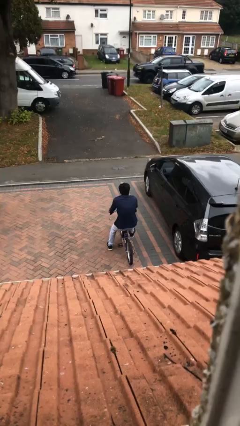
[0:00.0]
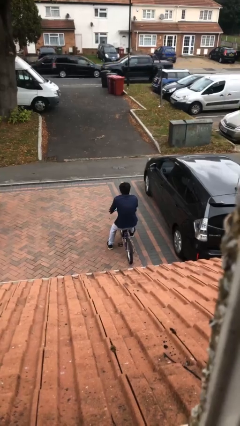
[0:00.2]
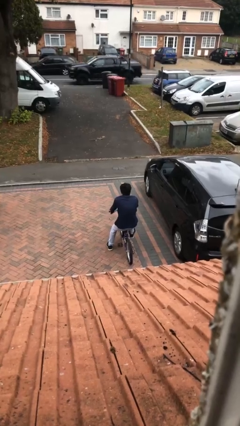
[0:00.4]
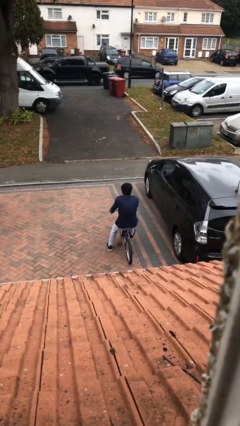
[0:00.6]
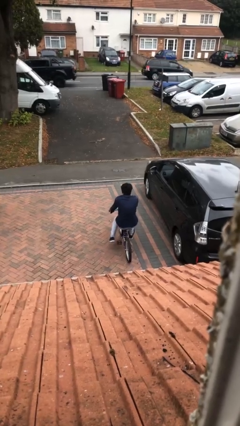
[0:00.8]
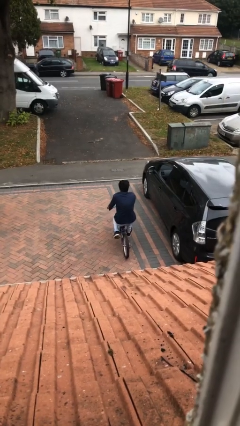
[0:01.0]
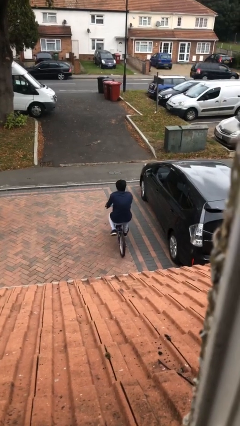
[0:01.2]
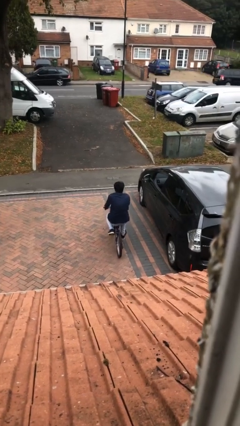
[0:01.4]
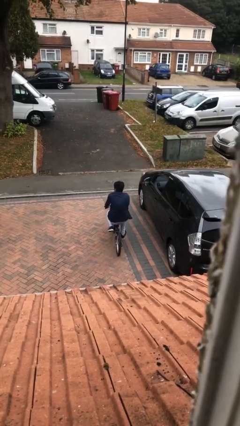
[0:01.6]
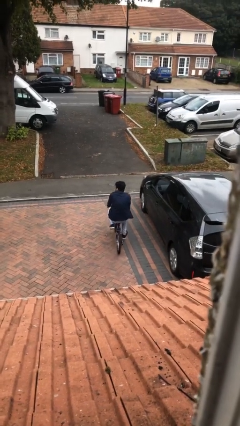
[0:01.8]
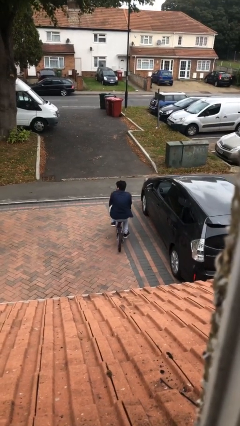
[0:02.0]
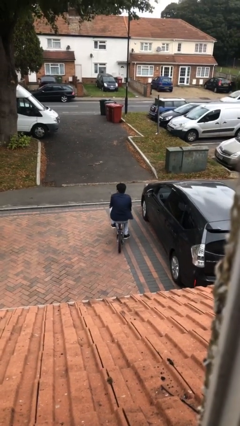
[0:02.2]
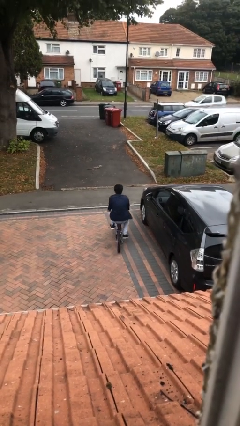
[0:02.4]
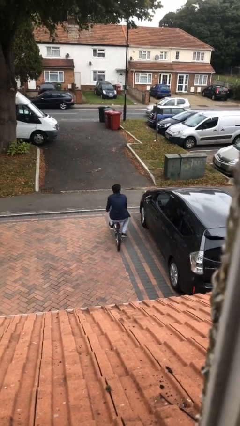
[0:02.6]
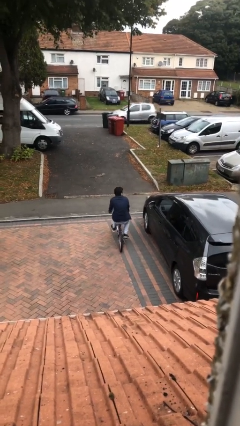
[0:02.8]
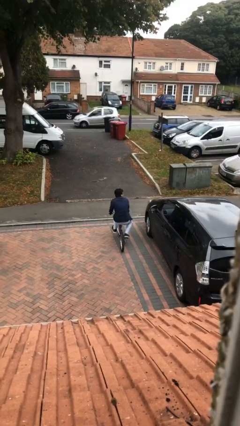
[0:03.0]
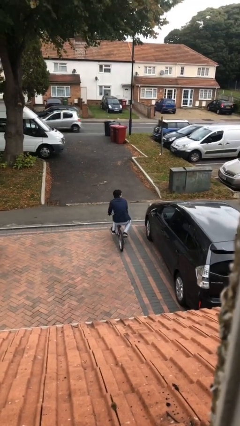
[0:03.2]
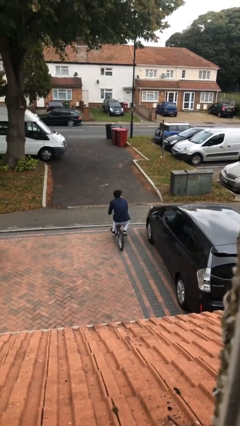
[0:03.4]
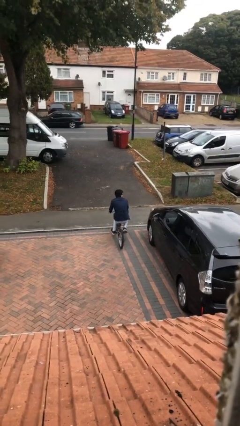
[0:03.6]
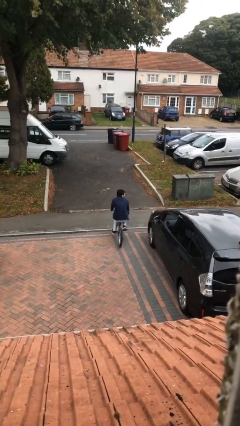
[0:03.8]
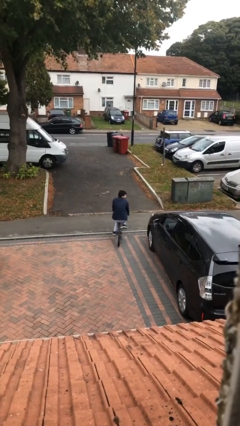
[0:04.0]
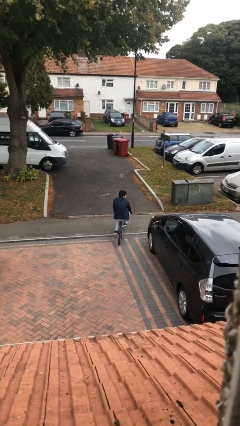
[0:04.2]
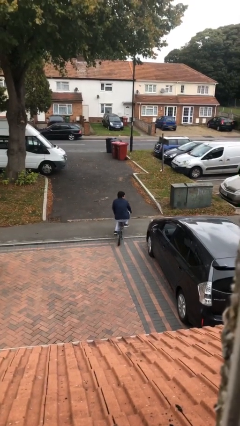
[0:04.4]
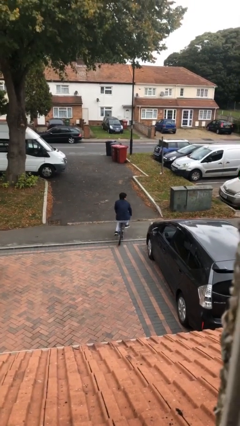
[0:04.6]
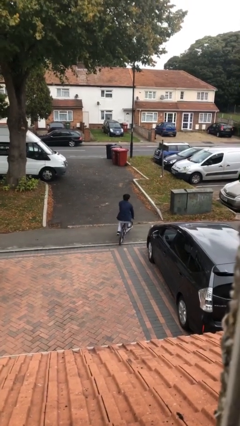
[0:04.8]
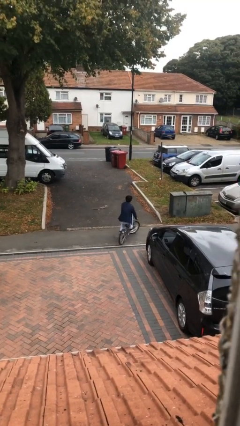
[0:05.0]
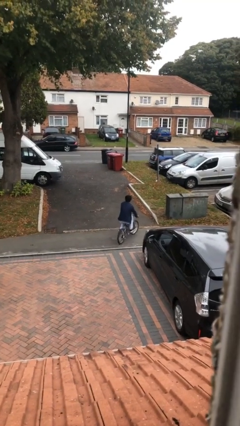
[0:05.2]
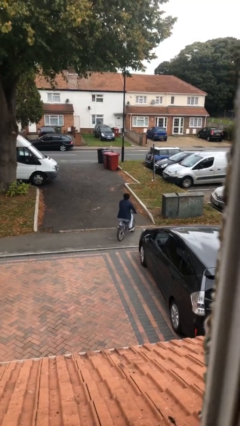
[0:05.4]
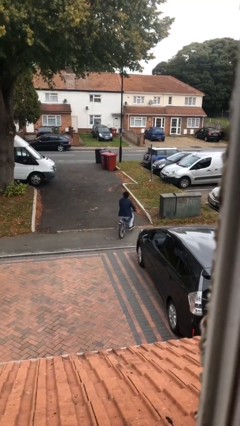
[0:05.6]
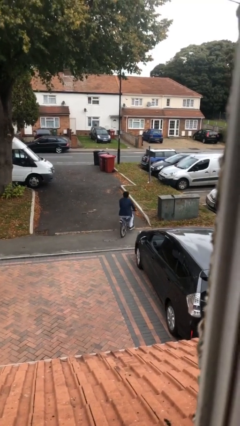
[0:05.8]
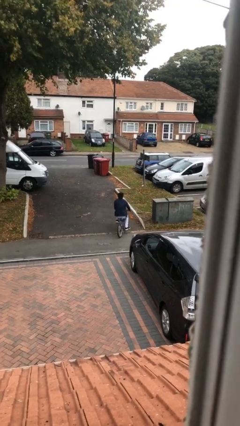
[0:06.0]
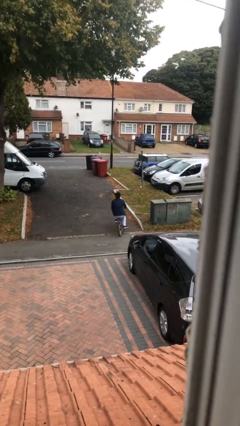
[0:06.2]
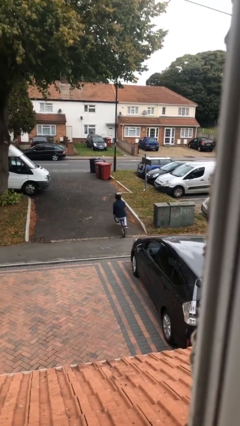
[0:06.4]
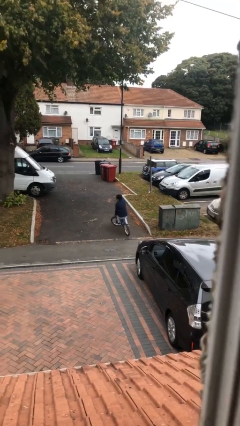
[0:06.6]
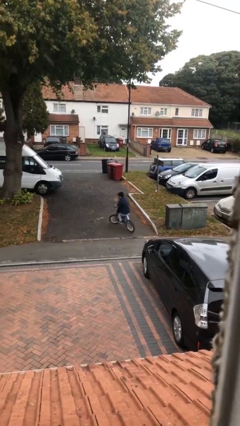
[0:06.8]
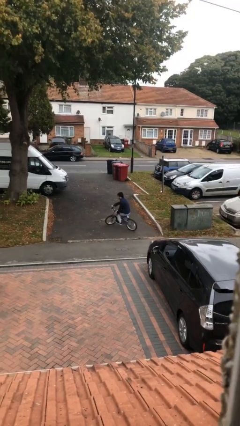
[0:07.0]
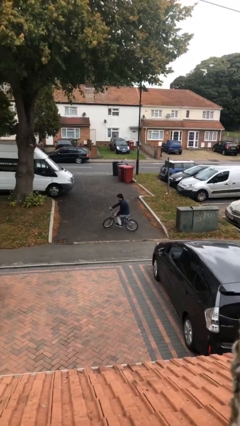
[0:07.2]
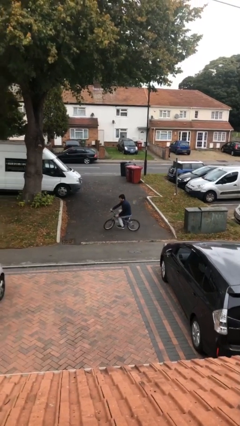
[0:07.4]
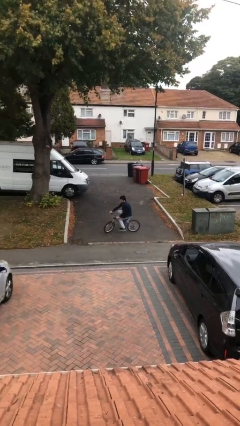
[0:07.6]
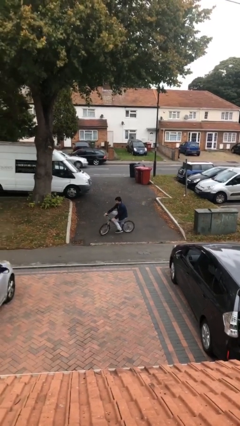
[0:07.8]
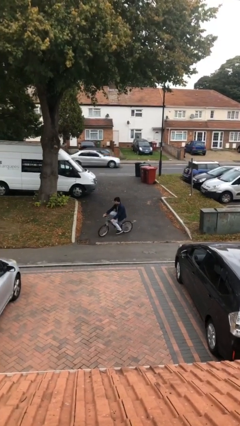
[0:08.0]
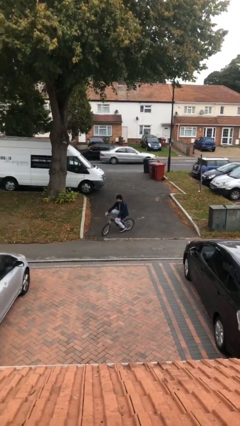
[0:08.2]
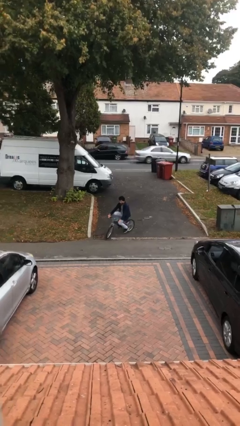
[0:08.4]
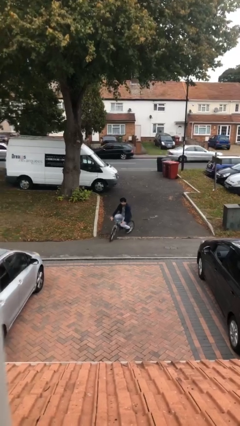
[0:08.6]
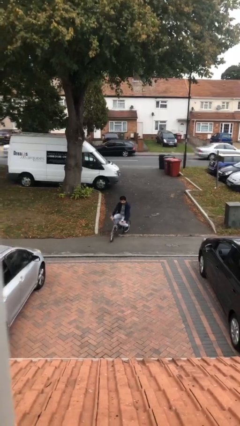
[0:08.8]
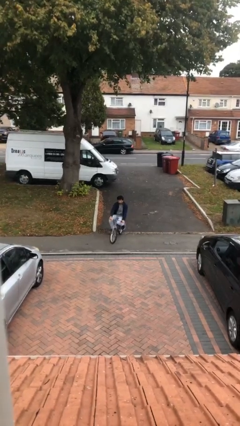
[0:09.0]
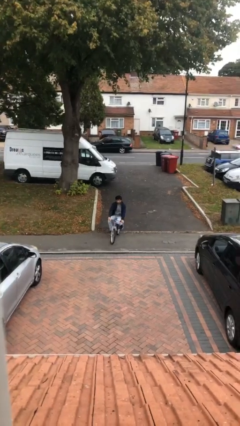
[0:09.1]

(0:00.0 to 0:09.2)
person rides bicycle

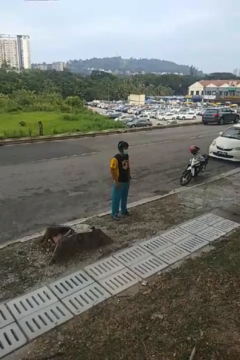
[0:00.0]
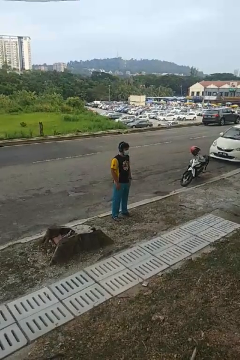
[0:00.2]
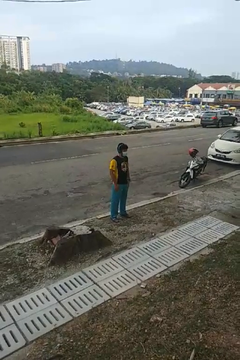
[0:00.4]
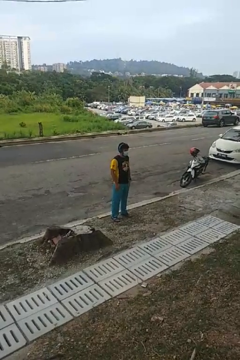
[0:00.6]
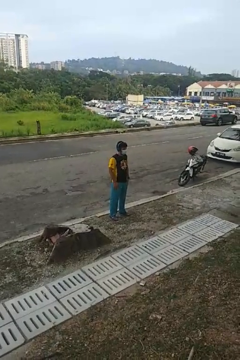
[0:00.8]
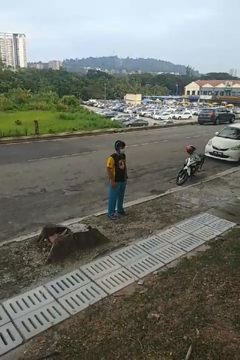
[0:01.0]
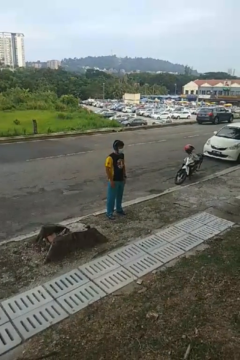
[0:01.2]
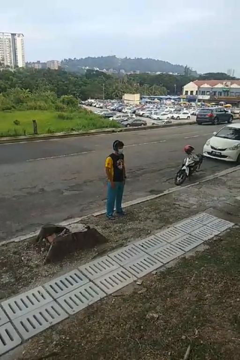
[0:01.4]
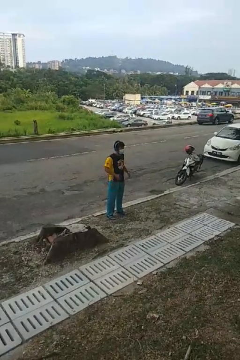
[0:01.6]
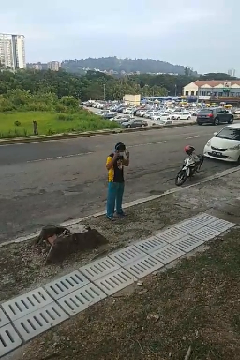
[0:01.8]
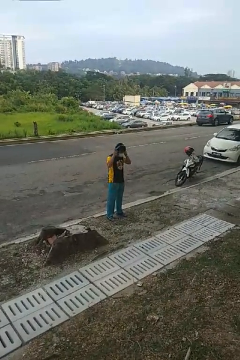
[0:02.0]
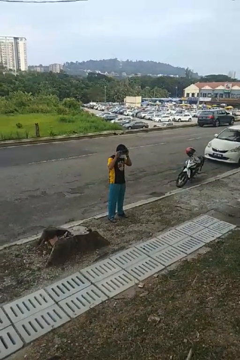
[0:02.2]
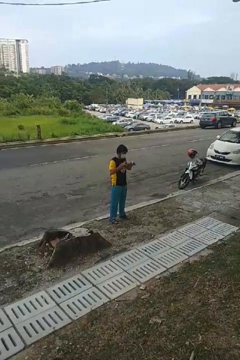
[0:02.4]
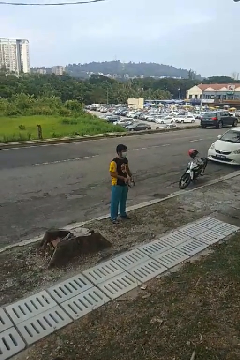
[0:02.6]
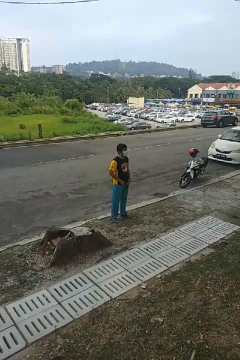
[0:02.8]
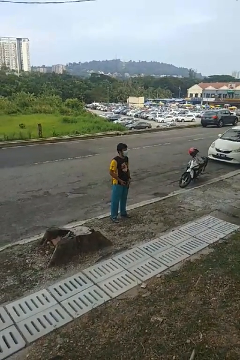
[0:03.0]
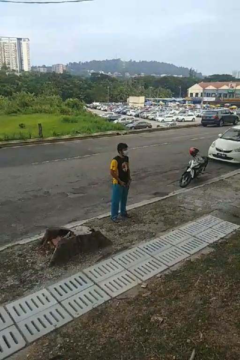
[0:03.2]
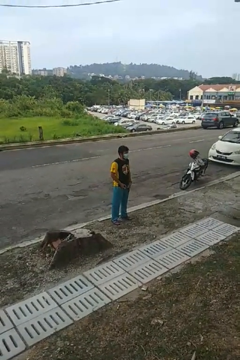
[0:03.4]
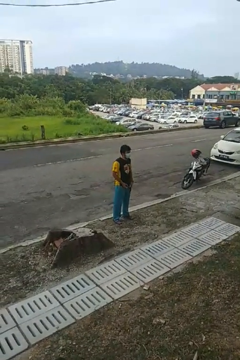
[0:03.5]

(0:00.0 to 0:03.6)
person takes off headphones

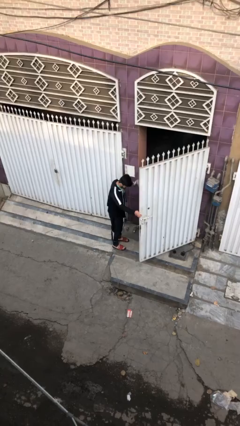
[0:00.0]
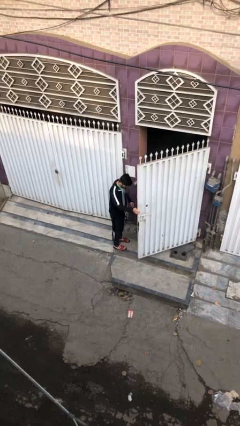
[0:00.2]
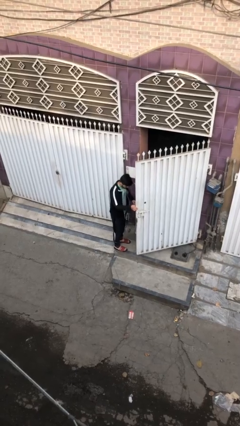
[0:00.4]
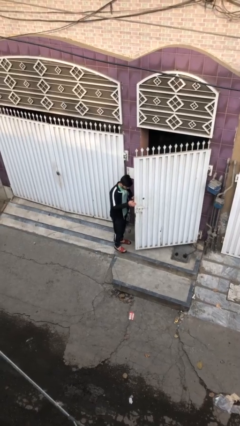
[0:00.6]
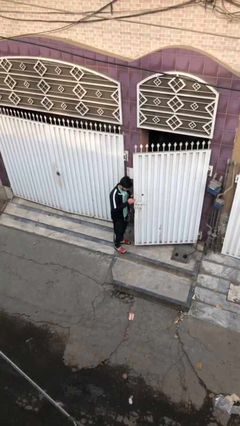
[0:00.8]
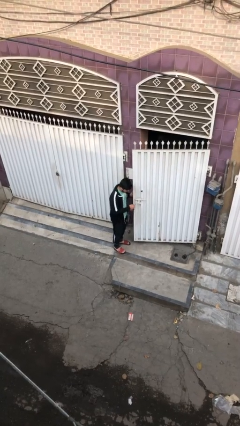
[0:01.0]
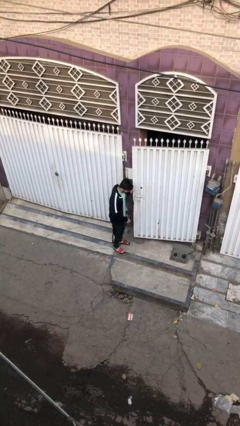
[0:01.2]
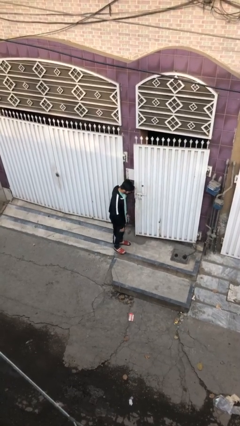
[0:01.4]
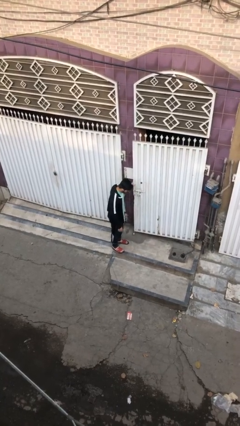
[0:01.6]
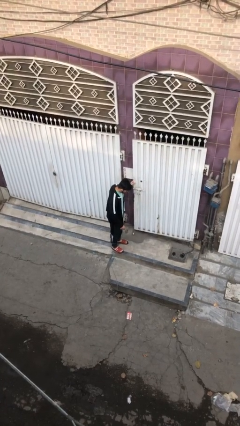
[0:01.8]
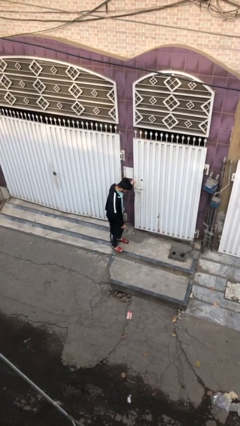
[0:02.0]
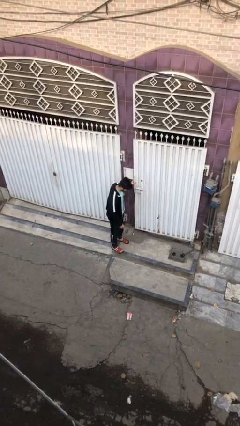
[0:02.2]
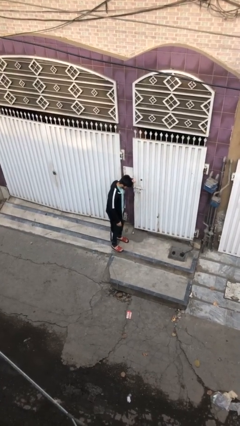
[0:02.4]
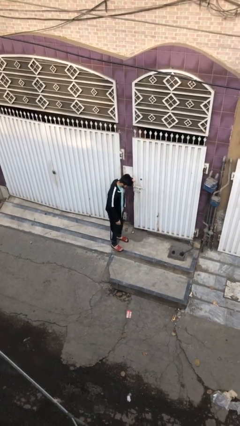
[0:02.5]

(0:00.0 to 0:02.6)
person closes facility door

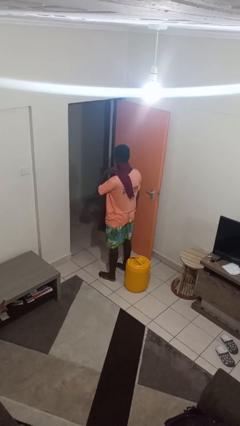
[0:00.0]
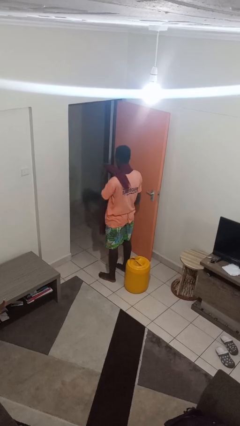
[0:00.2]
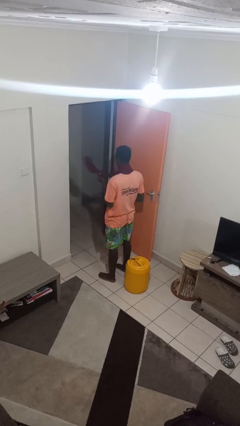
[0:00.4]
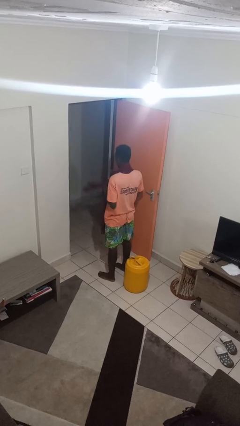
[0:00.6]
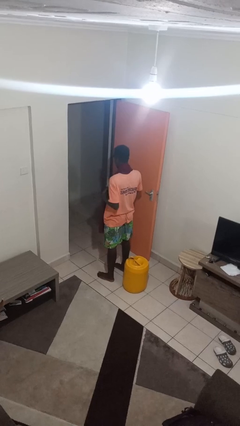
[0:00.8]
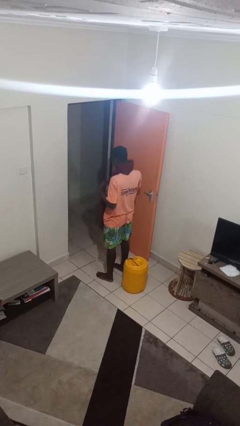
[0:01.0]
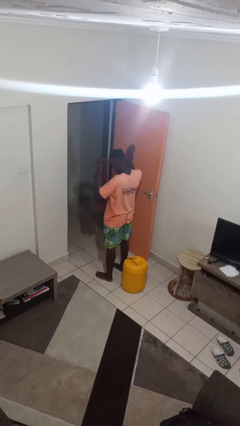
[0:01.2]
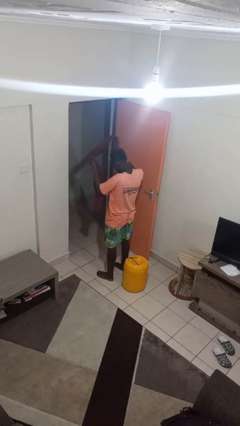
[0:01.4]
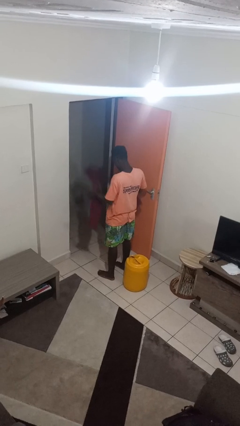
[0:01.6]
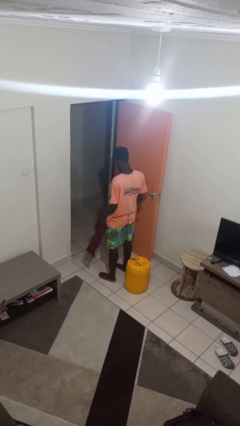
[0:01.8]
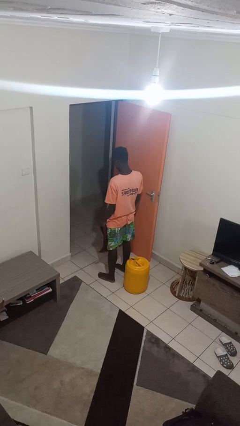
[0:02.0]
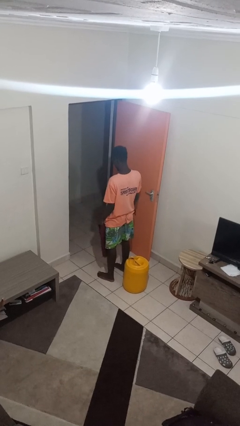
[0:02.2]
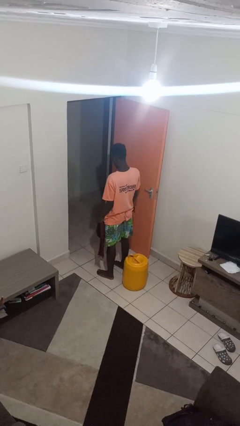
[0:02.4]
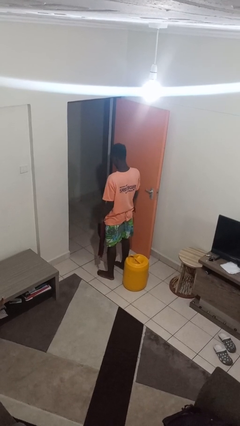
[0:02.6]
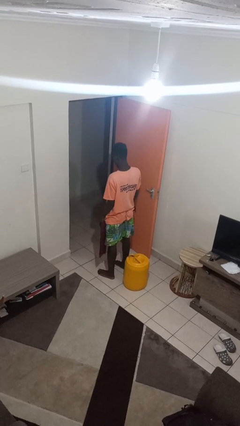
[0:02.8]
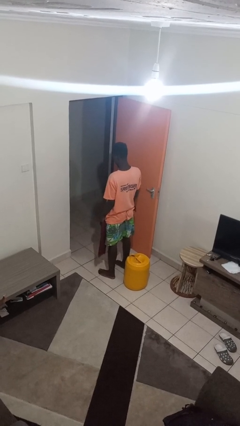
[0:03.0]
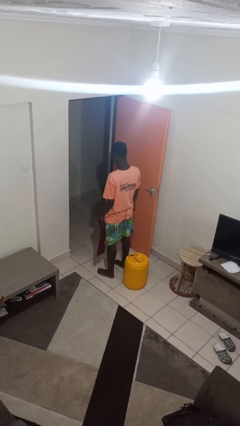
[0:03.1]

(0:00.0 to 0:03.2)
person takes off scarf

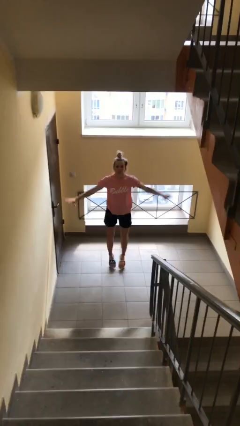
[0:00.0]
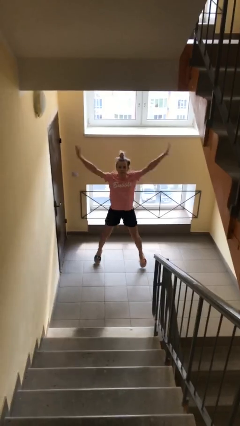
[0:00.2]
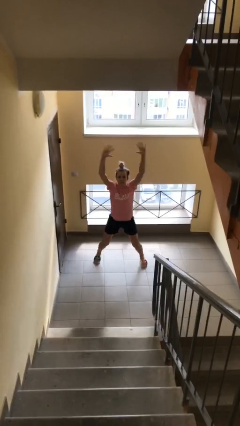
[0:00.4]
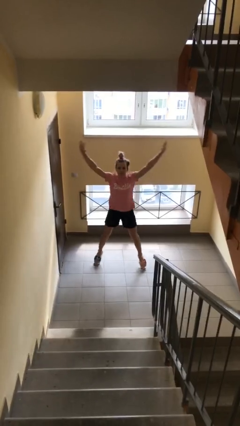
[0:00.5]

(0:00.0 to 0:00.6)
person exercises with jumping jacks
